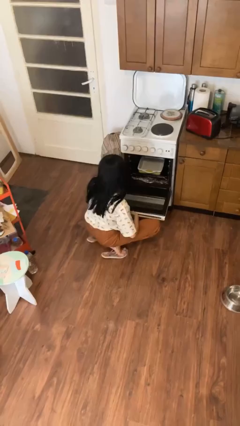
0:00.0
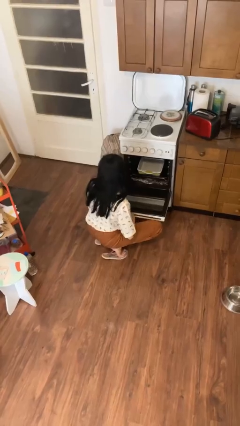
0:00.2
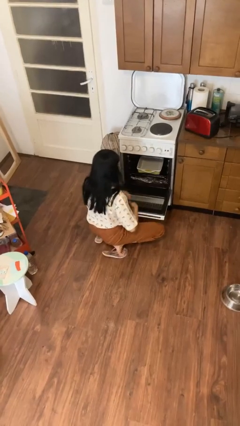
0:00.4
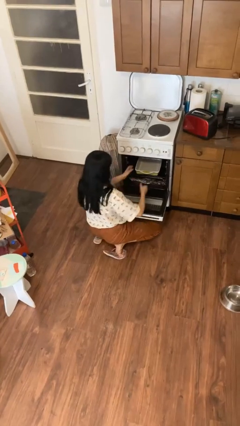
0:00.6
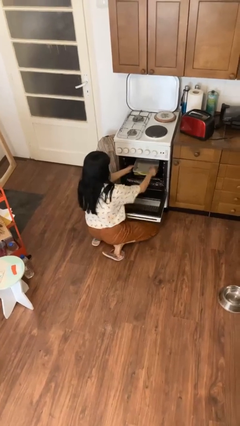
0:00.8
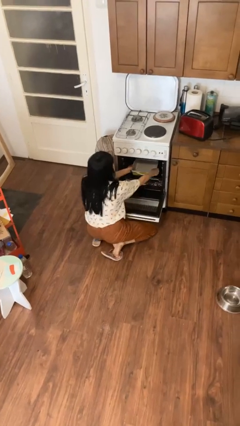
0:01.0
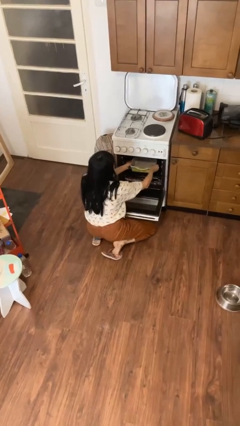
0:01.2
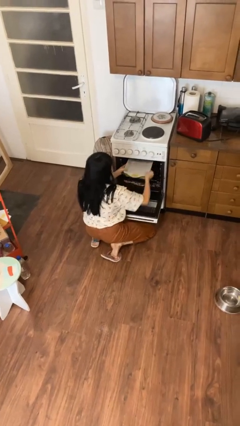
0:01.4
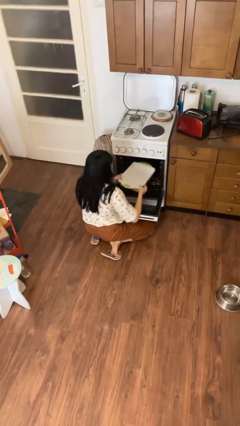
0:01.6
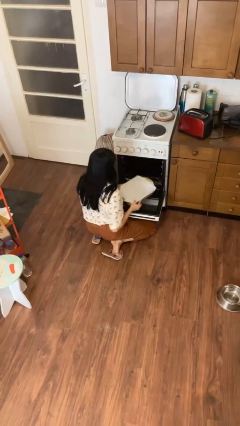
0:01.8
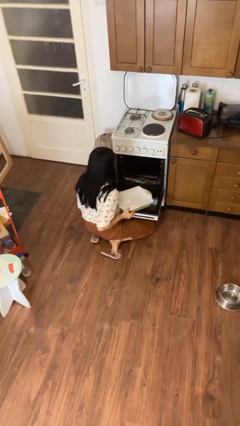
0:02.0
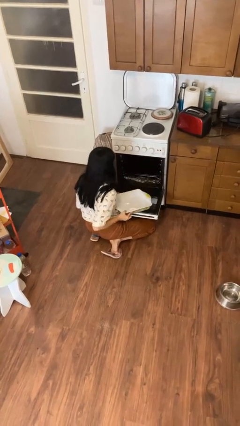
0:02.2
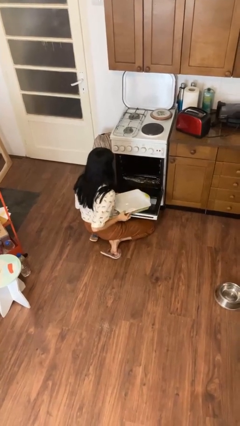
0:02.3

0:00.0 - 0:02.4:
person takes object from oven

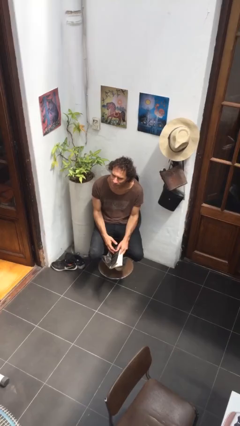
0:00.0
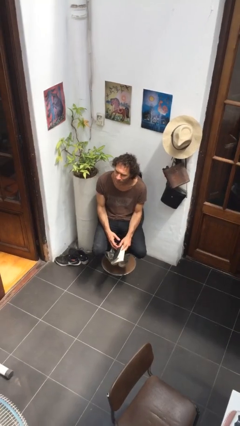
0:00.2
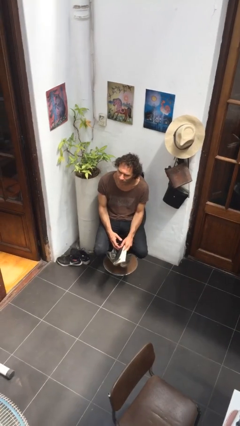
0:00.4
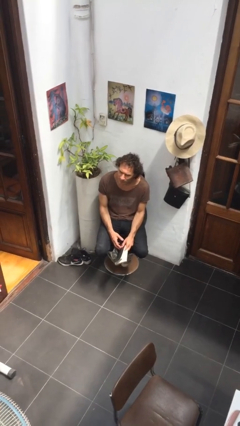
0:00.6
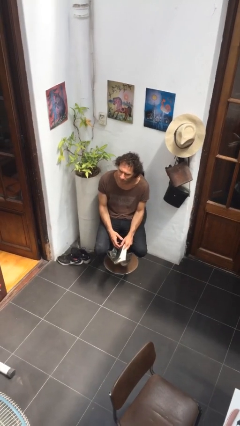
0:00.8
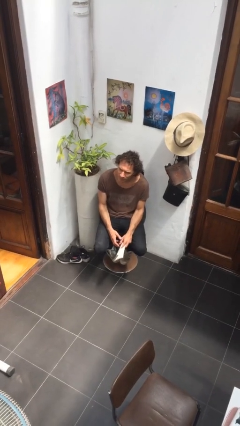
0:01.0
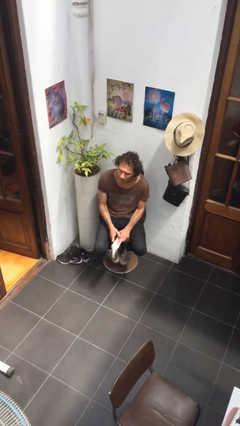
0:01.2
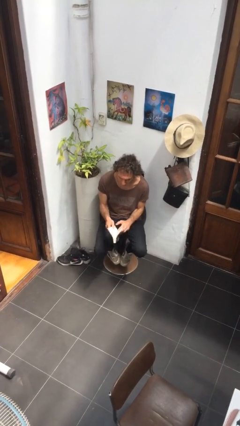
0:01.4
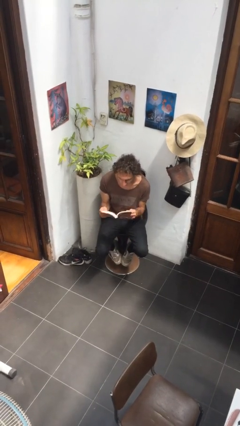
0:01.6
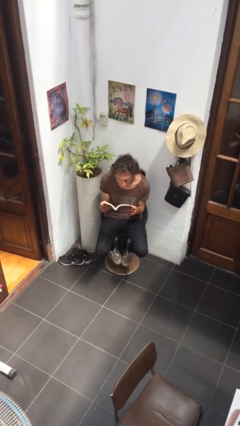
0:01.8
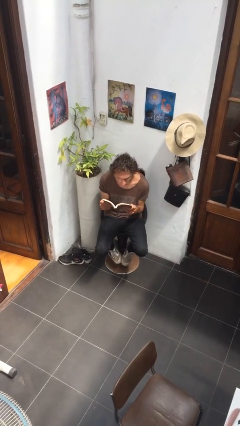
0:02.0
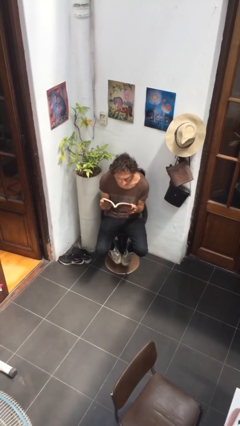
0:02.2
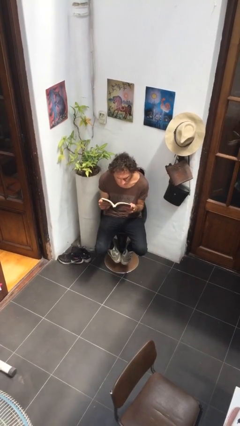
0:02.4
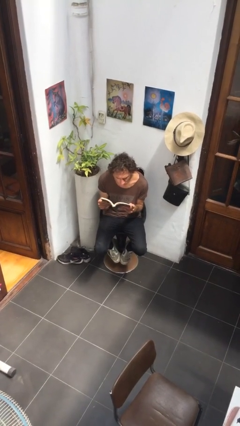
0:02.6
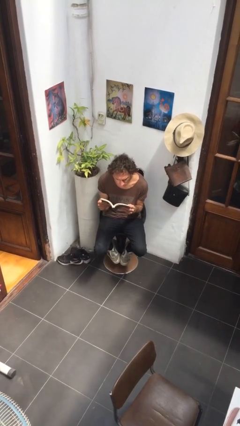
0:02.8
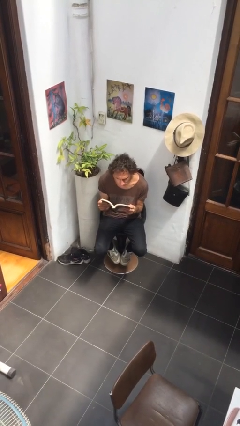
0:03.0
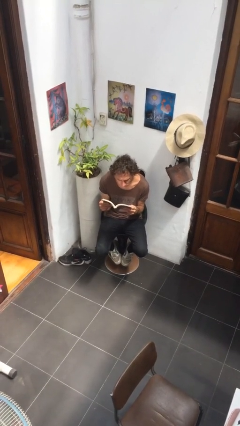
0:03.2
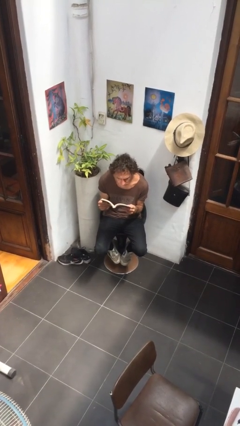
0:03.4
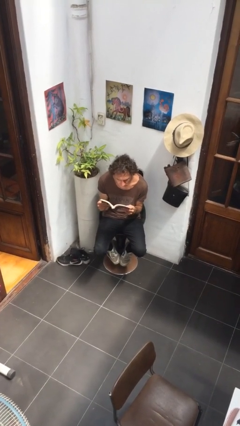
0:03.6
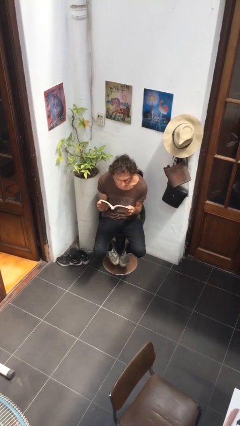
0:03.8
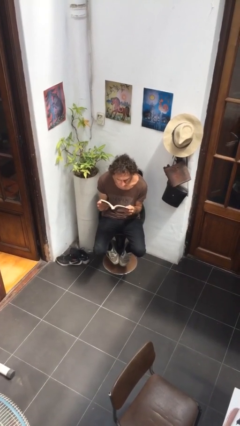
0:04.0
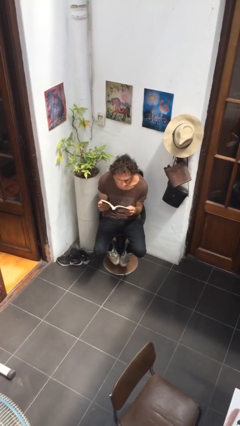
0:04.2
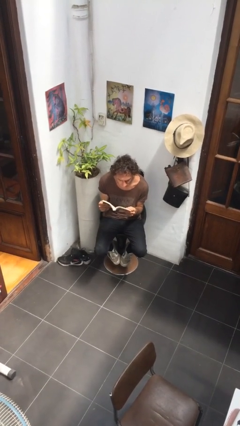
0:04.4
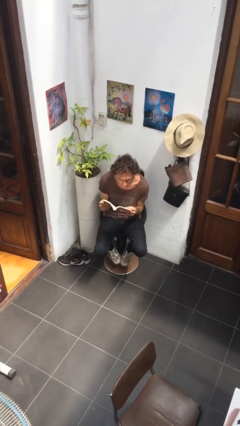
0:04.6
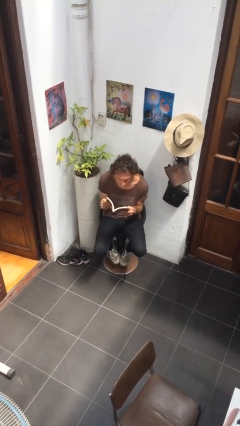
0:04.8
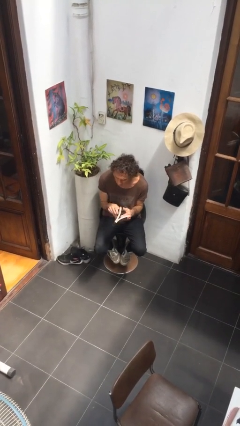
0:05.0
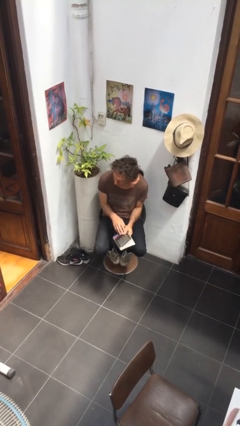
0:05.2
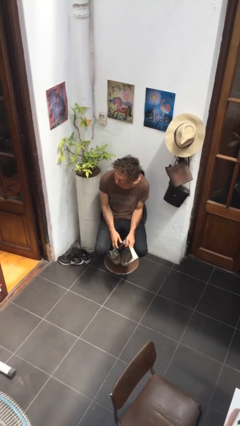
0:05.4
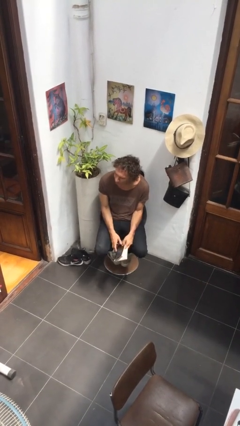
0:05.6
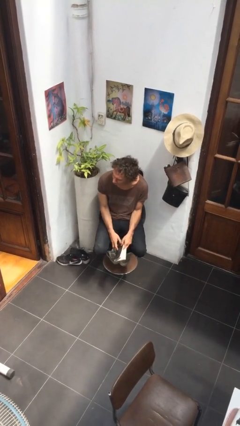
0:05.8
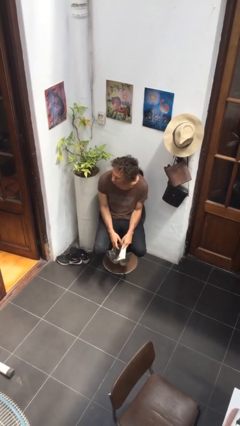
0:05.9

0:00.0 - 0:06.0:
person reads document

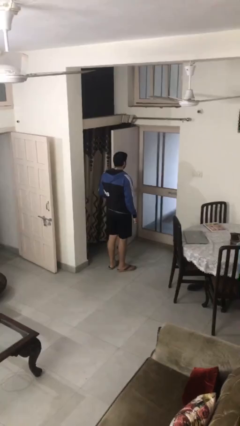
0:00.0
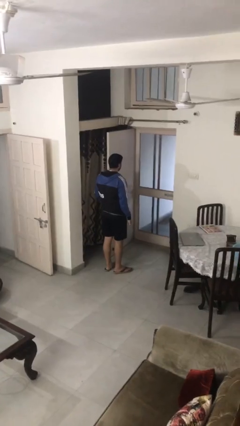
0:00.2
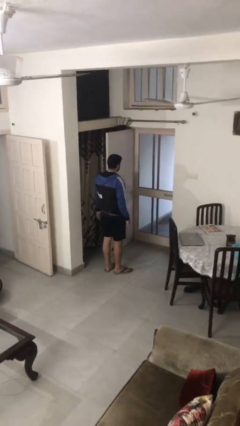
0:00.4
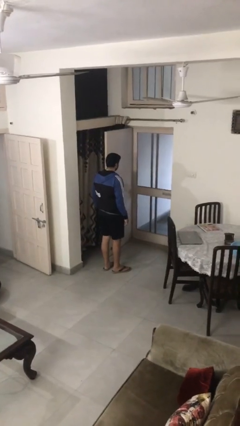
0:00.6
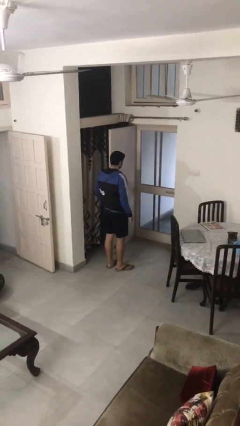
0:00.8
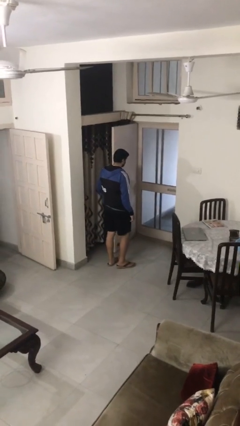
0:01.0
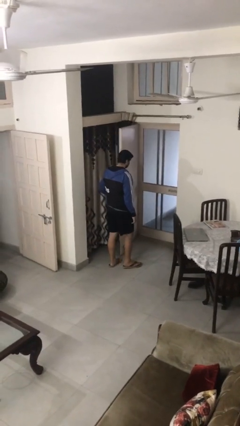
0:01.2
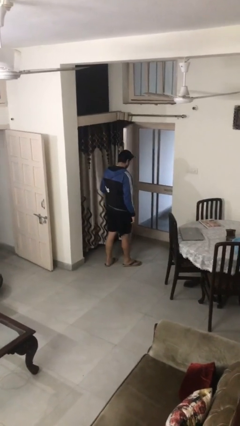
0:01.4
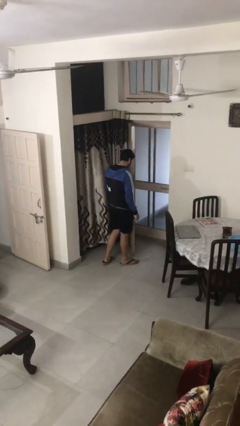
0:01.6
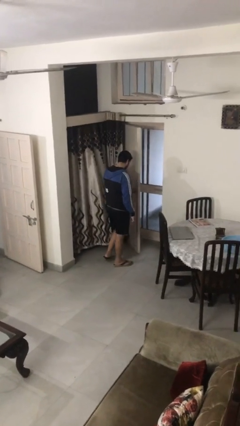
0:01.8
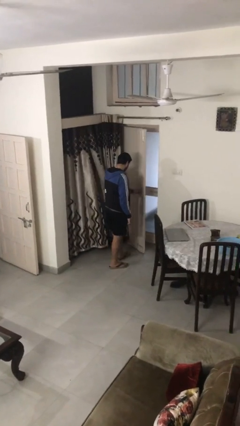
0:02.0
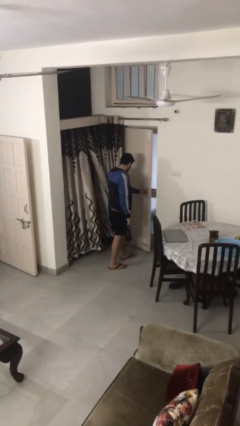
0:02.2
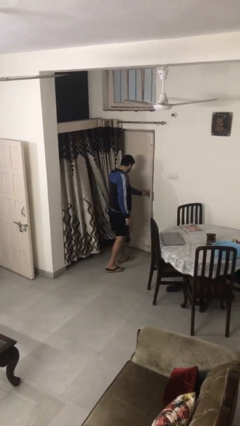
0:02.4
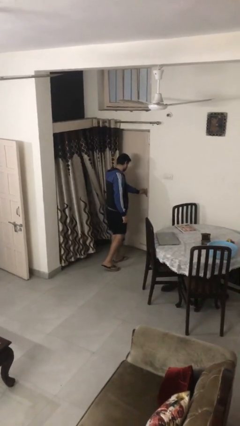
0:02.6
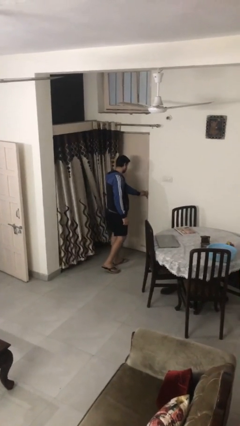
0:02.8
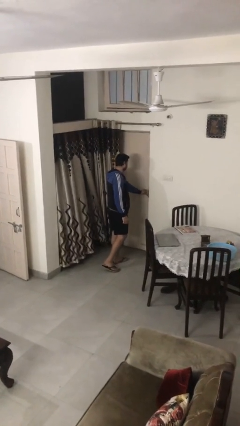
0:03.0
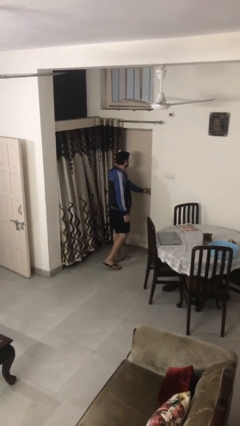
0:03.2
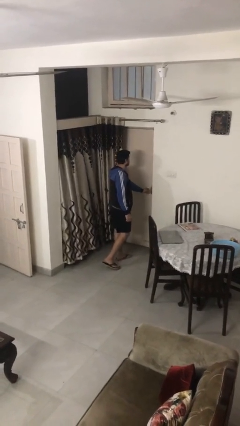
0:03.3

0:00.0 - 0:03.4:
person closes facility door

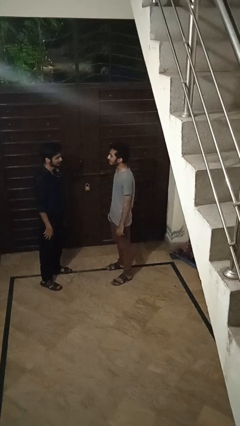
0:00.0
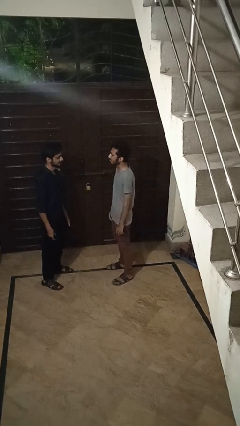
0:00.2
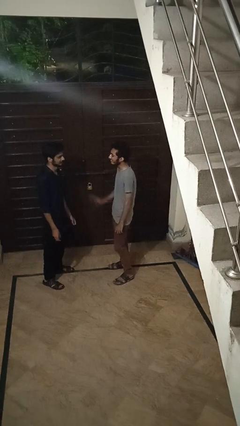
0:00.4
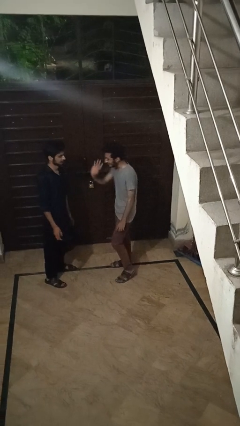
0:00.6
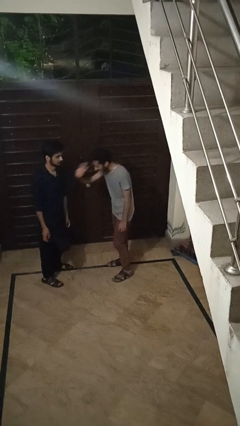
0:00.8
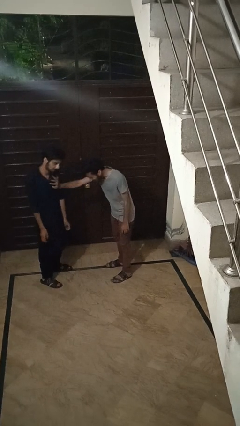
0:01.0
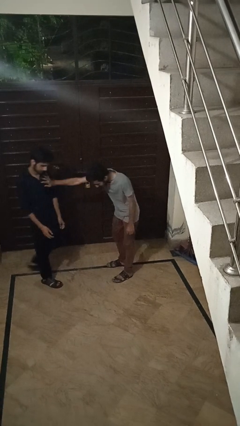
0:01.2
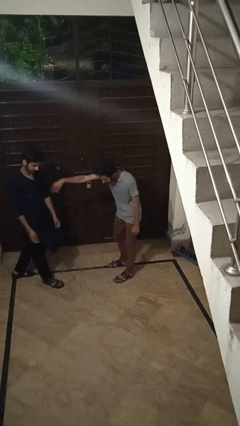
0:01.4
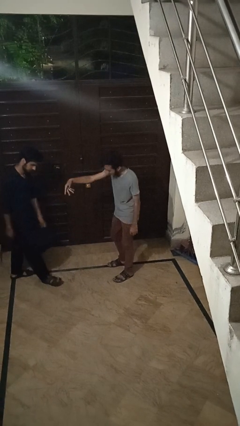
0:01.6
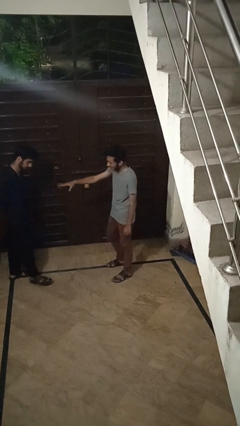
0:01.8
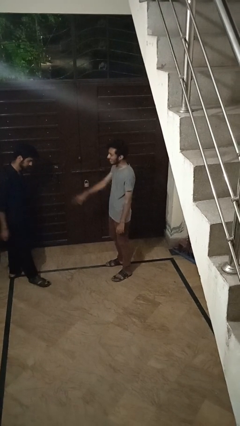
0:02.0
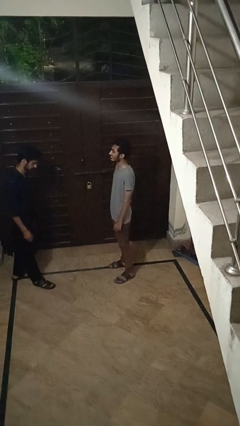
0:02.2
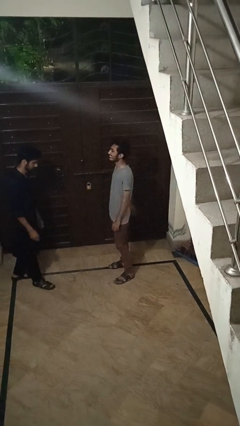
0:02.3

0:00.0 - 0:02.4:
person shoves person

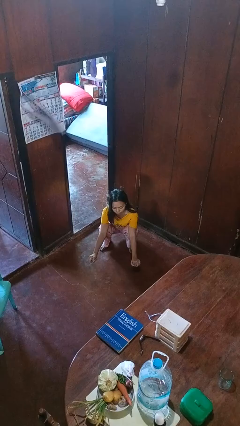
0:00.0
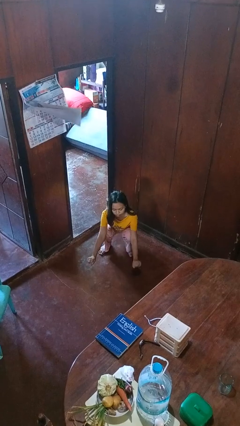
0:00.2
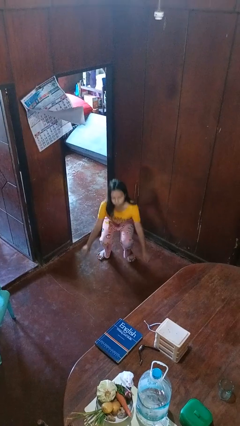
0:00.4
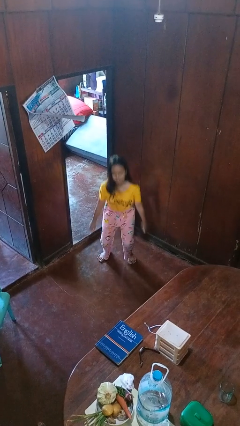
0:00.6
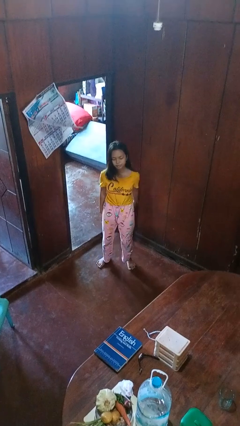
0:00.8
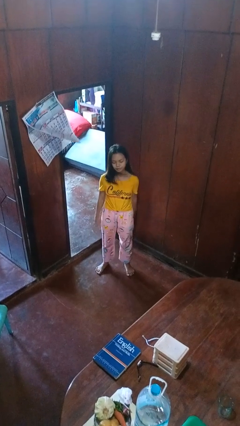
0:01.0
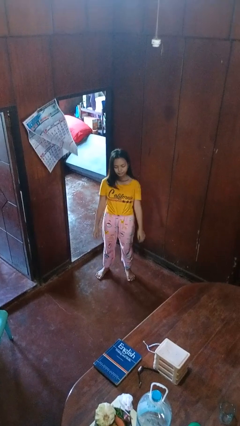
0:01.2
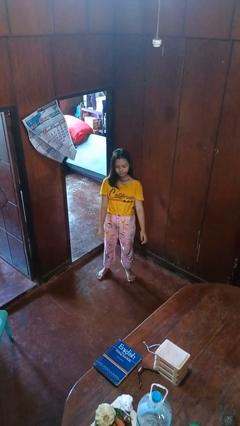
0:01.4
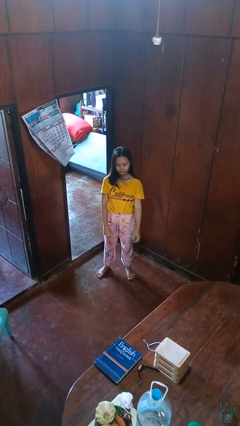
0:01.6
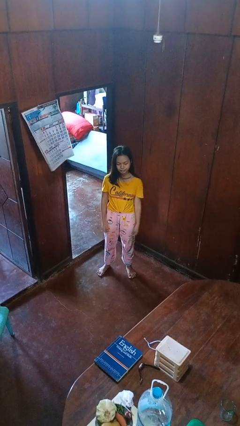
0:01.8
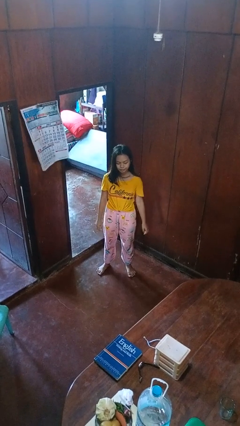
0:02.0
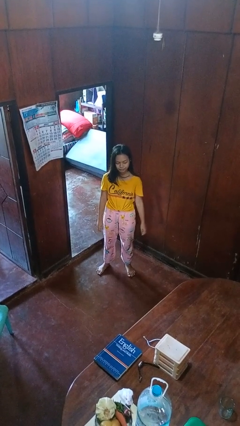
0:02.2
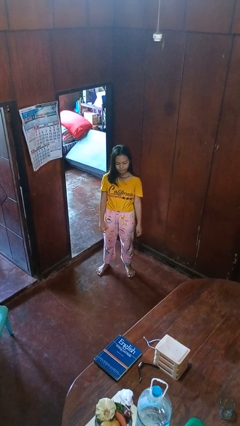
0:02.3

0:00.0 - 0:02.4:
person stands up

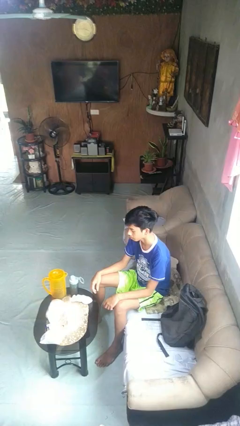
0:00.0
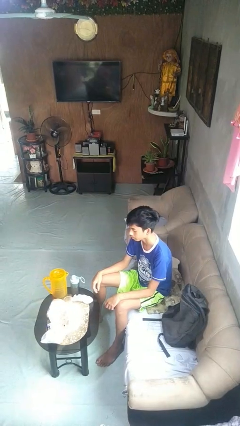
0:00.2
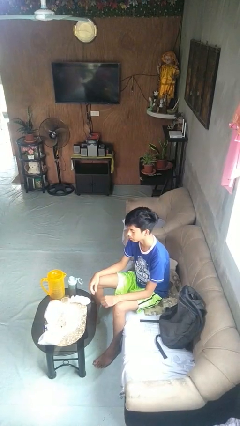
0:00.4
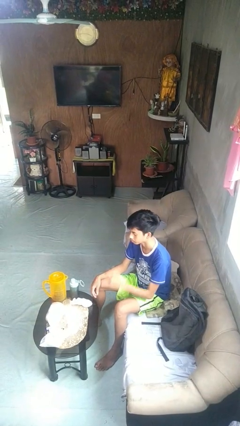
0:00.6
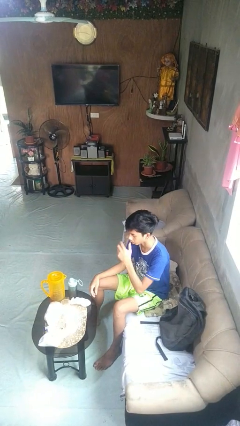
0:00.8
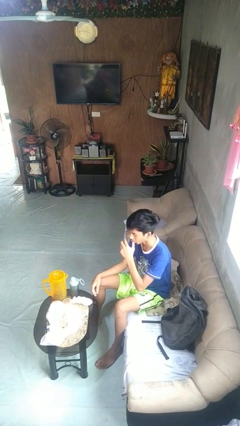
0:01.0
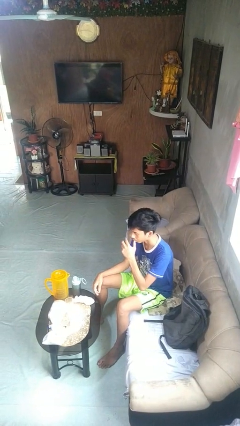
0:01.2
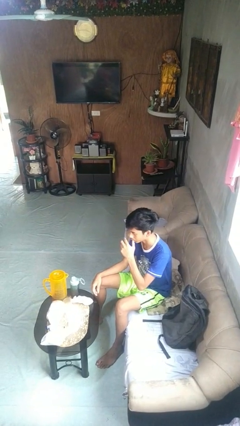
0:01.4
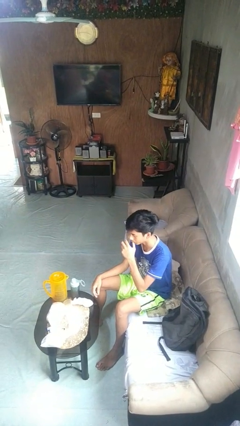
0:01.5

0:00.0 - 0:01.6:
person licks fingers
